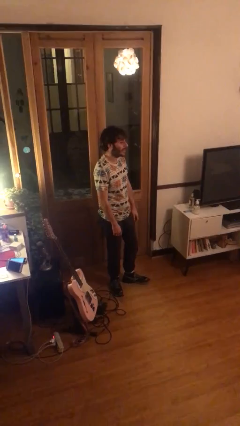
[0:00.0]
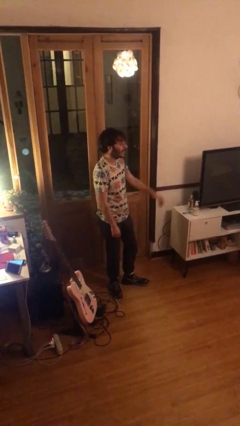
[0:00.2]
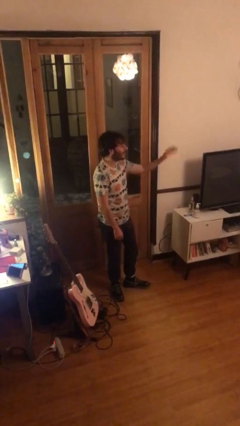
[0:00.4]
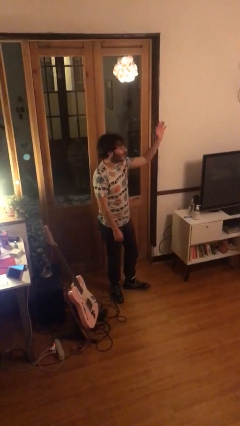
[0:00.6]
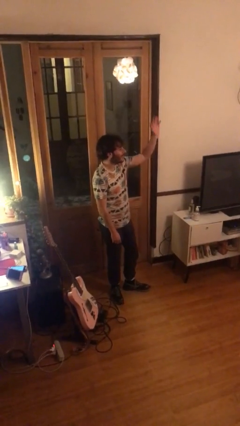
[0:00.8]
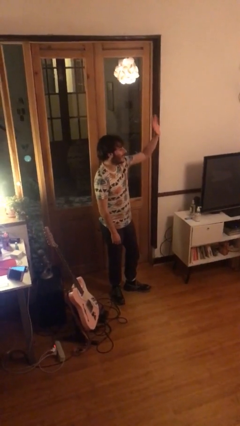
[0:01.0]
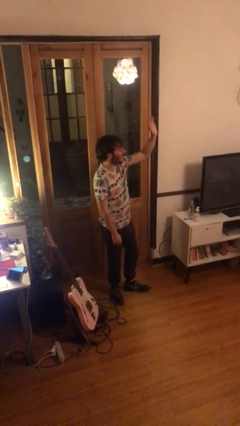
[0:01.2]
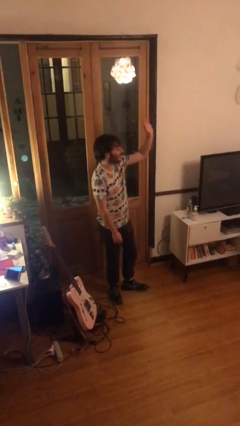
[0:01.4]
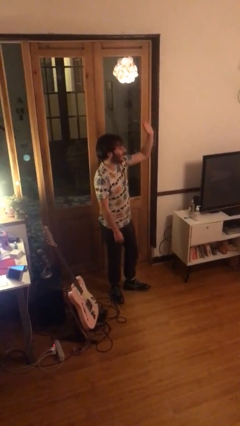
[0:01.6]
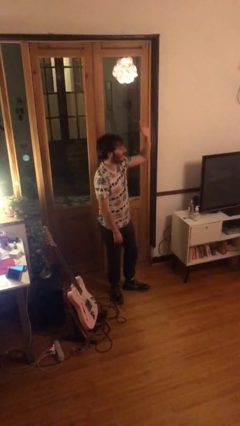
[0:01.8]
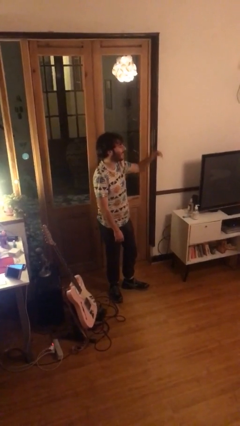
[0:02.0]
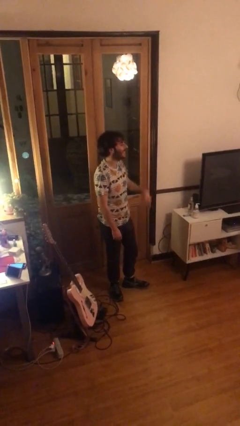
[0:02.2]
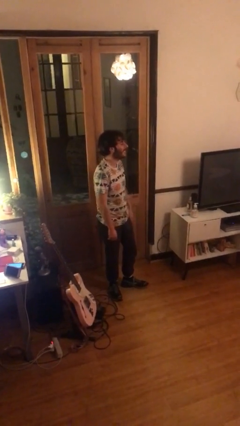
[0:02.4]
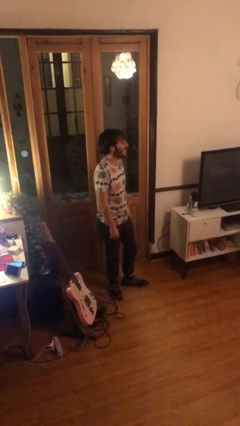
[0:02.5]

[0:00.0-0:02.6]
person waves at person

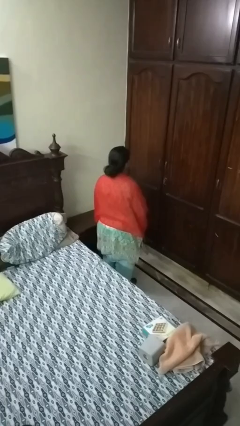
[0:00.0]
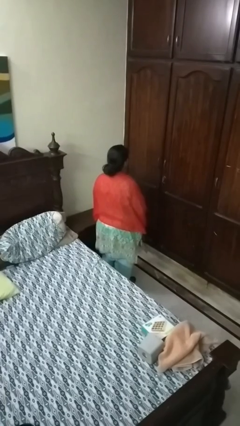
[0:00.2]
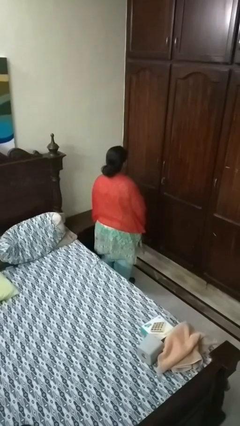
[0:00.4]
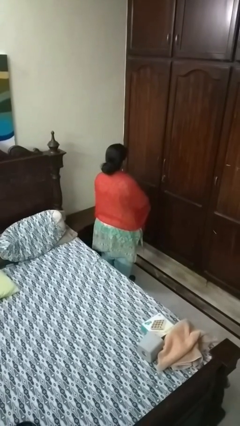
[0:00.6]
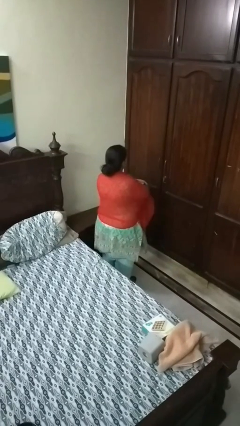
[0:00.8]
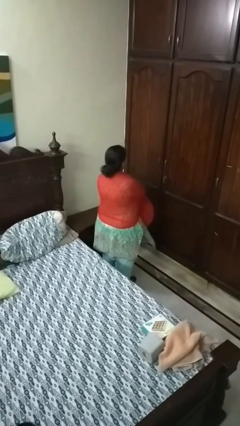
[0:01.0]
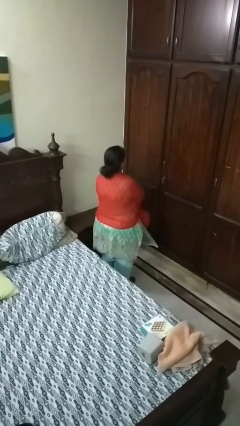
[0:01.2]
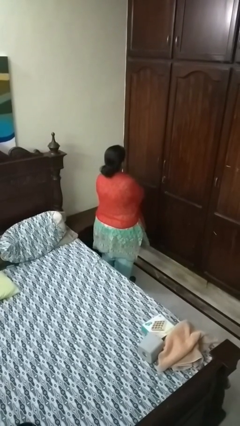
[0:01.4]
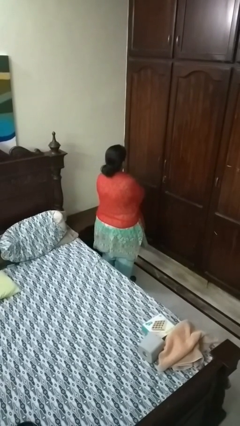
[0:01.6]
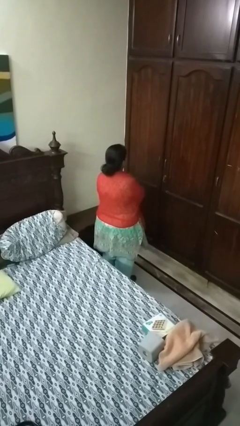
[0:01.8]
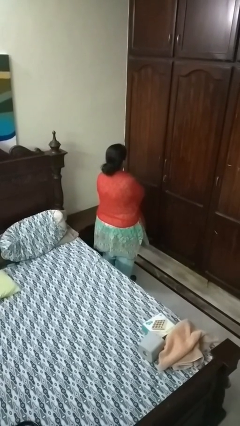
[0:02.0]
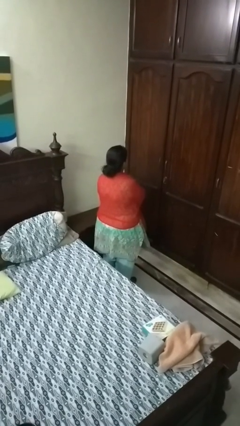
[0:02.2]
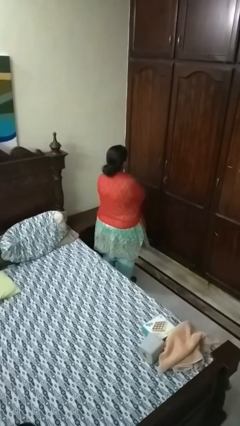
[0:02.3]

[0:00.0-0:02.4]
person crosses arms

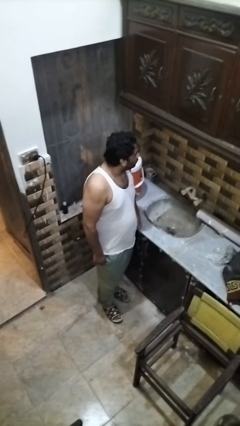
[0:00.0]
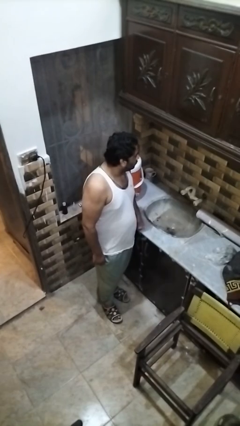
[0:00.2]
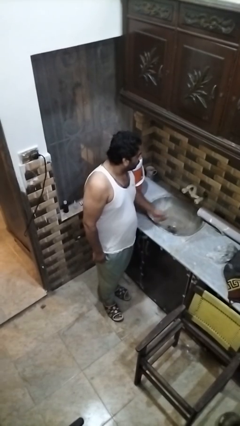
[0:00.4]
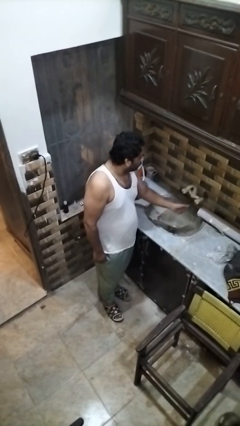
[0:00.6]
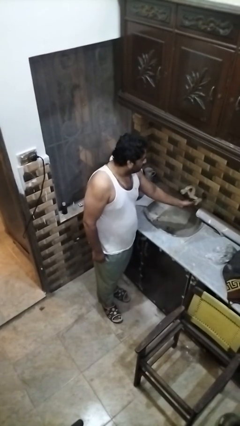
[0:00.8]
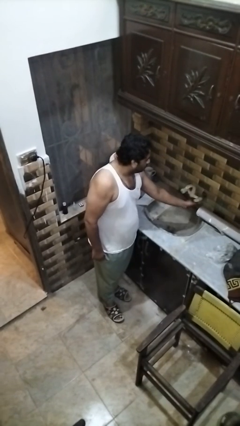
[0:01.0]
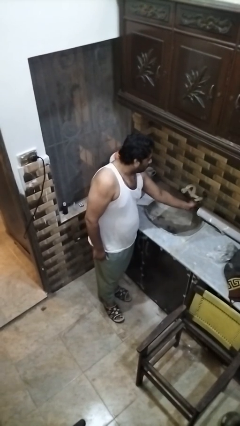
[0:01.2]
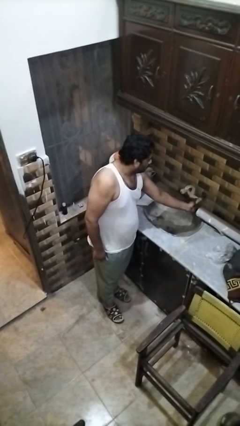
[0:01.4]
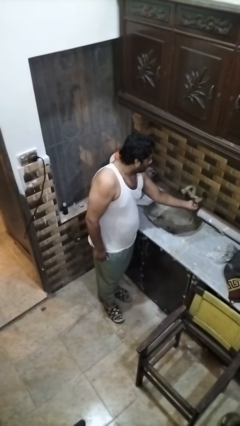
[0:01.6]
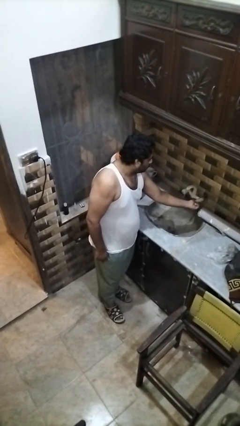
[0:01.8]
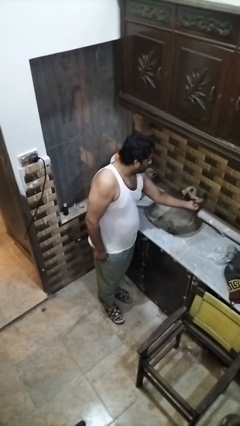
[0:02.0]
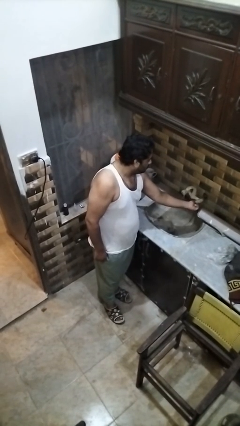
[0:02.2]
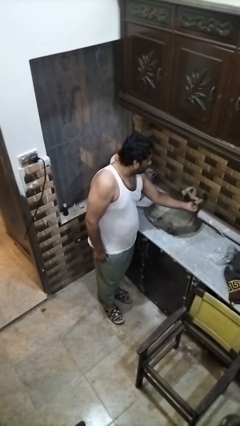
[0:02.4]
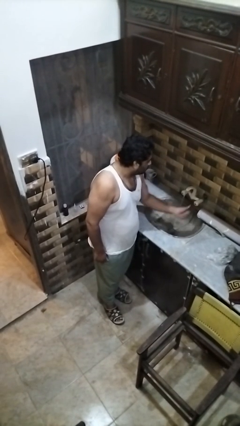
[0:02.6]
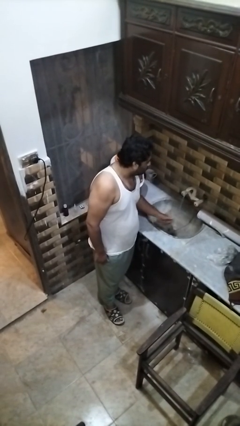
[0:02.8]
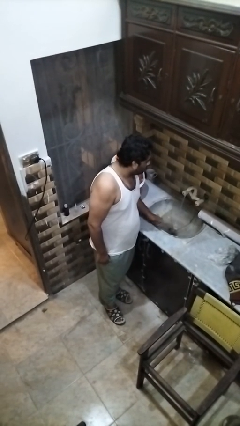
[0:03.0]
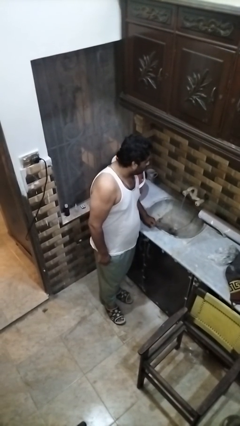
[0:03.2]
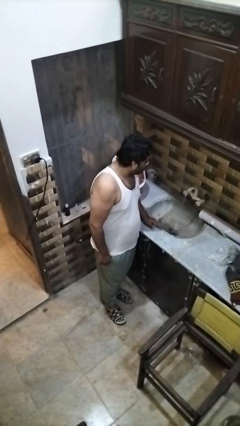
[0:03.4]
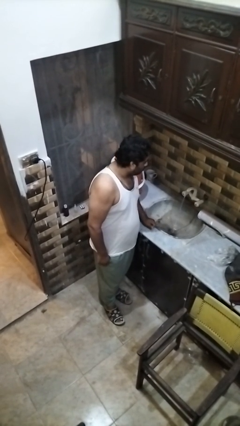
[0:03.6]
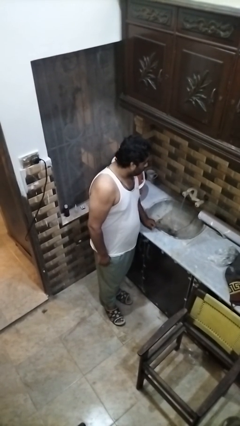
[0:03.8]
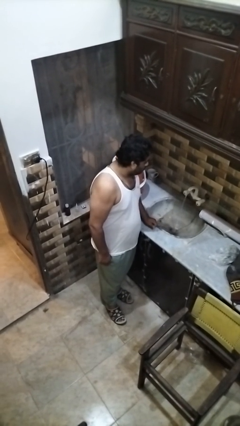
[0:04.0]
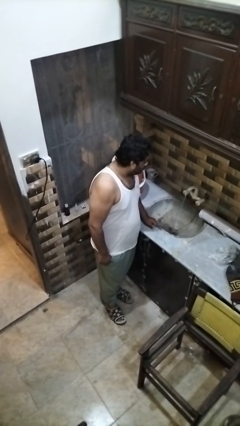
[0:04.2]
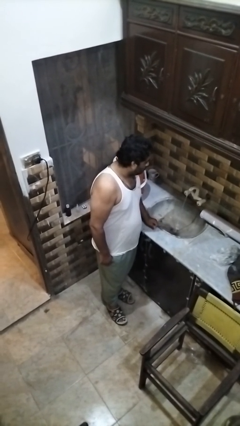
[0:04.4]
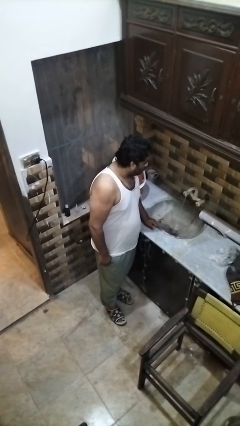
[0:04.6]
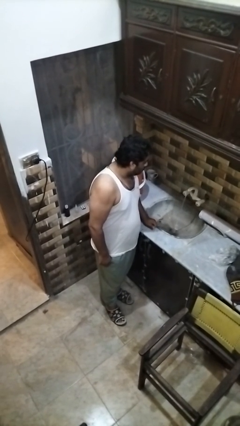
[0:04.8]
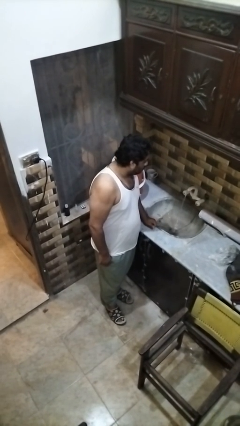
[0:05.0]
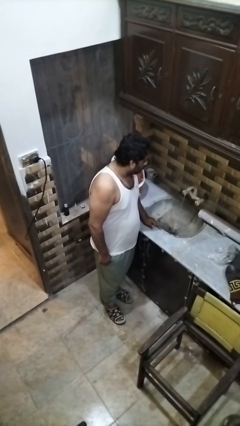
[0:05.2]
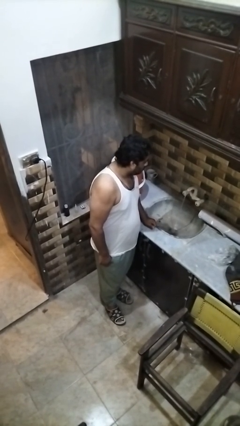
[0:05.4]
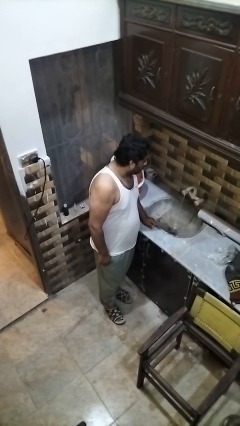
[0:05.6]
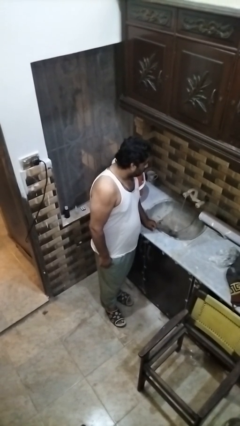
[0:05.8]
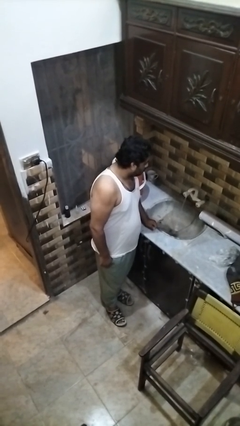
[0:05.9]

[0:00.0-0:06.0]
person turns on faucet

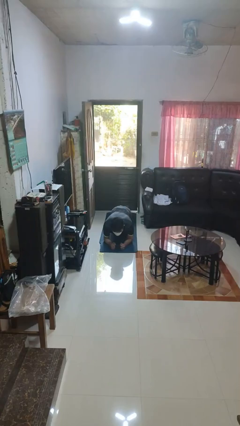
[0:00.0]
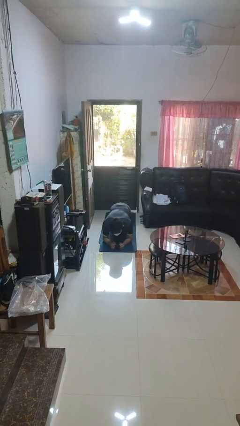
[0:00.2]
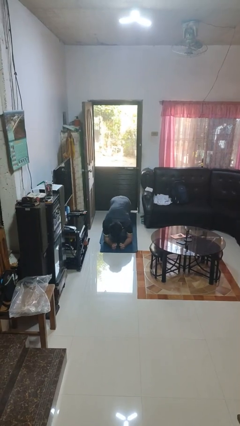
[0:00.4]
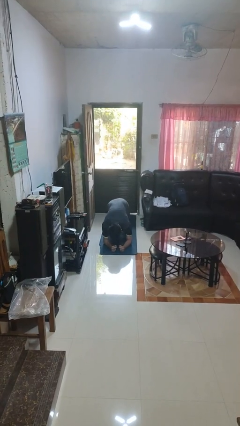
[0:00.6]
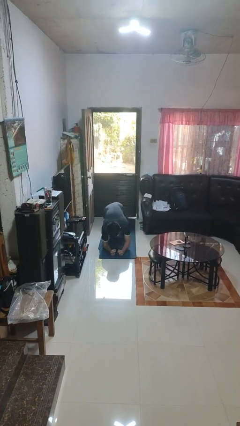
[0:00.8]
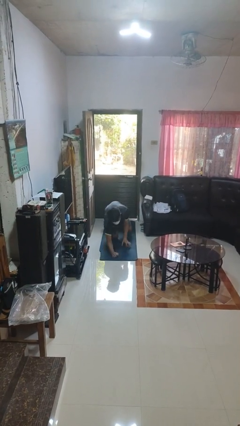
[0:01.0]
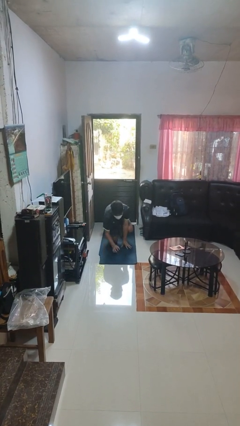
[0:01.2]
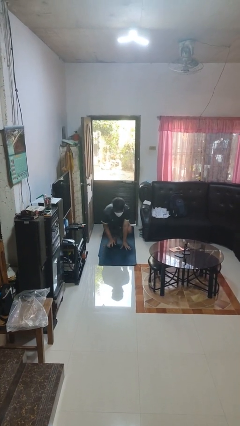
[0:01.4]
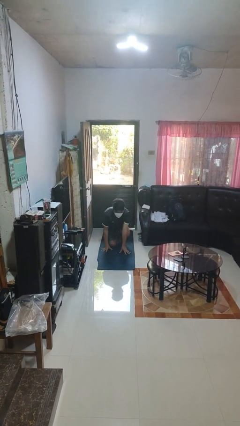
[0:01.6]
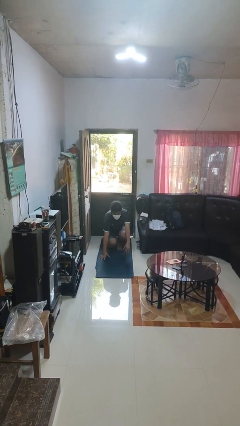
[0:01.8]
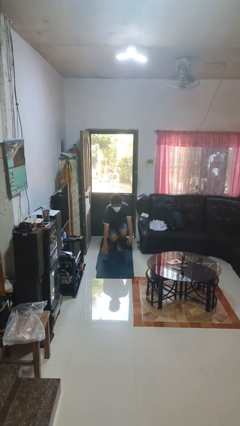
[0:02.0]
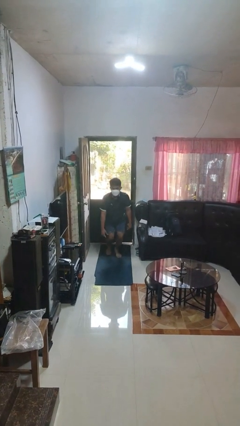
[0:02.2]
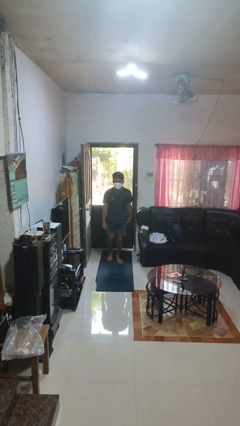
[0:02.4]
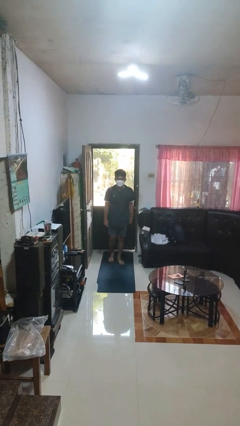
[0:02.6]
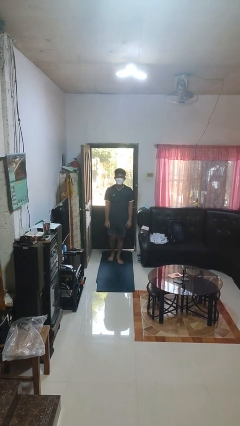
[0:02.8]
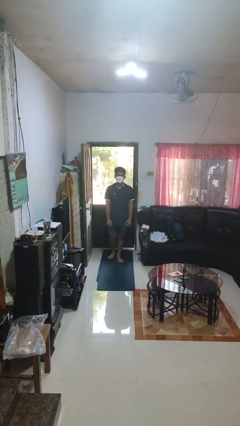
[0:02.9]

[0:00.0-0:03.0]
person stands up from floor

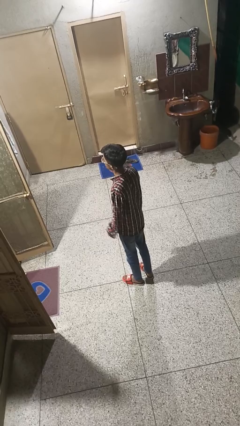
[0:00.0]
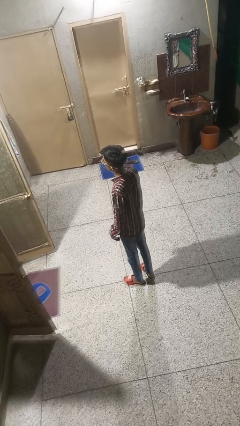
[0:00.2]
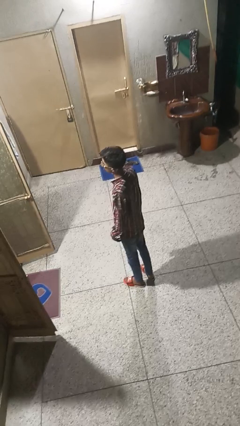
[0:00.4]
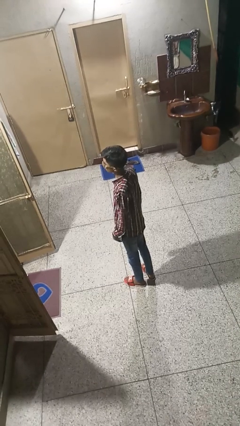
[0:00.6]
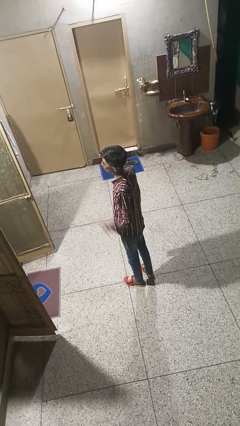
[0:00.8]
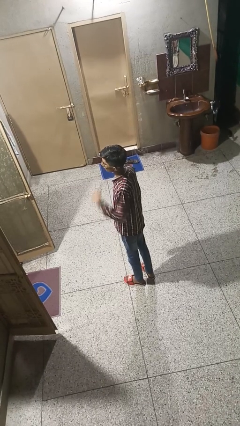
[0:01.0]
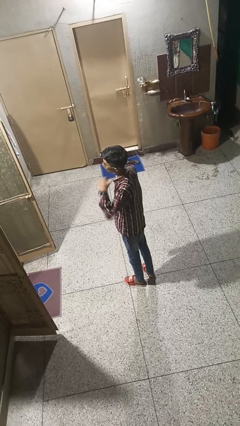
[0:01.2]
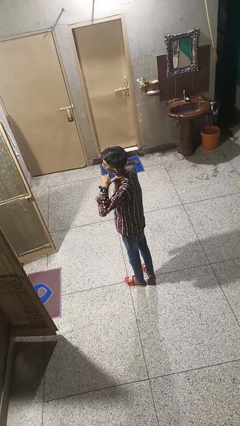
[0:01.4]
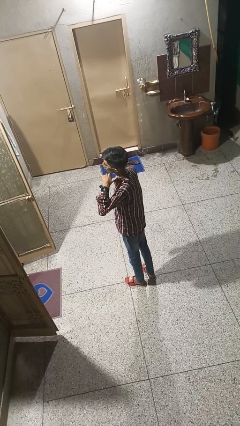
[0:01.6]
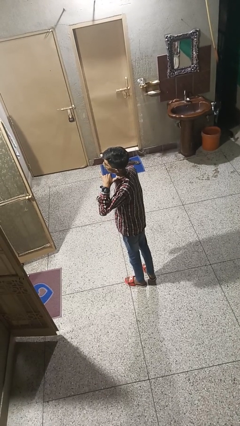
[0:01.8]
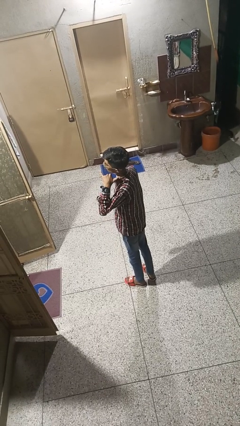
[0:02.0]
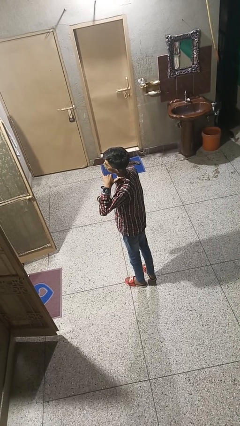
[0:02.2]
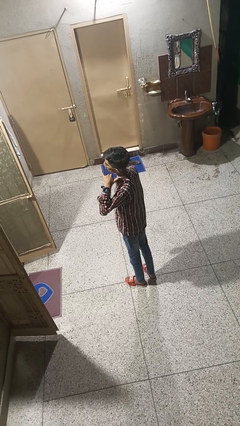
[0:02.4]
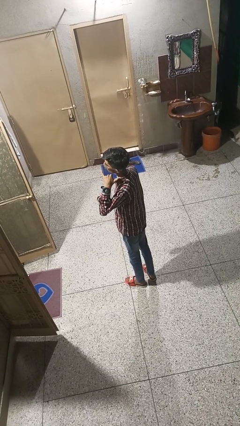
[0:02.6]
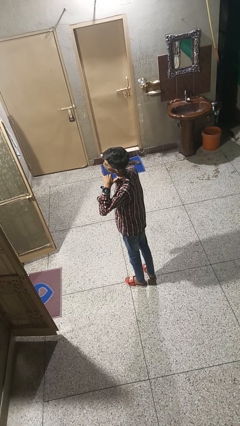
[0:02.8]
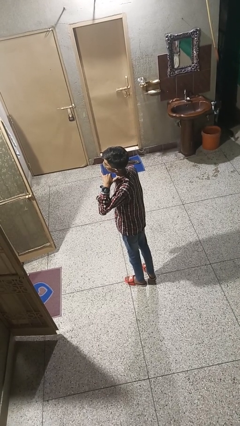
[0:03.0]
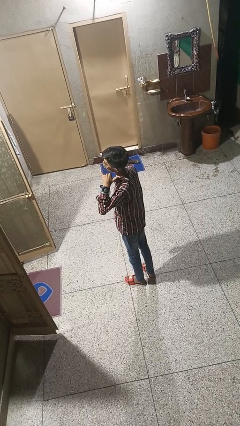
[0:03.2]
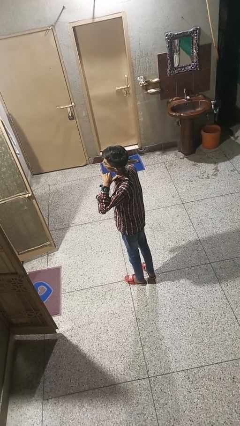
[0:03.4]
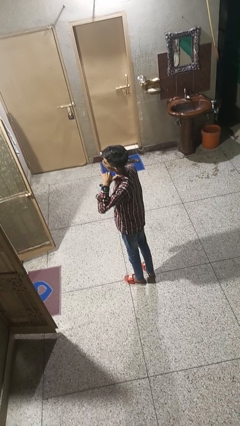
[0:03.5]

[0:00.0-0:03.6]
person gestures call me
